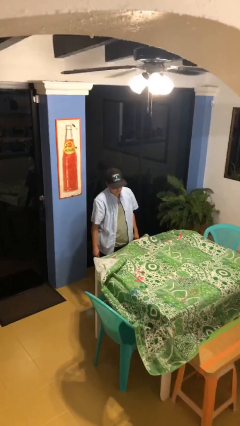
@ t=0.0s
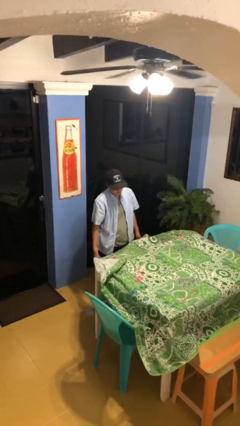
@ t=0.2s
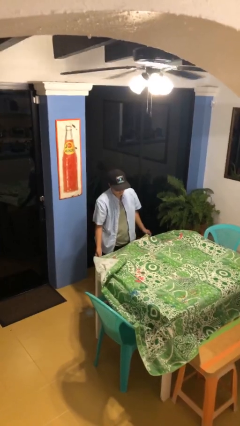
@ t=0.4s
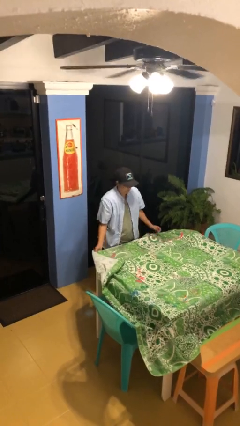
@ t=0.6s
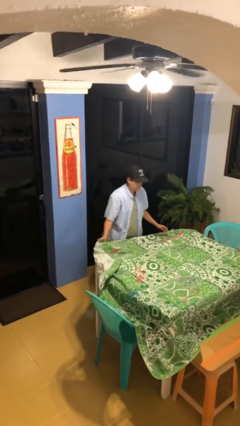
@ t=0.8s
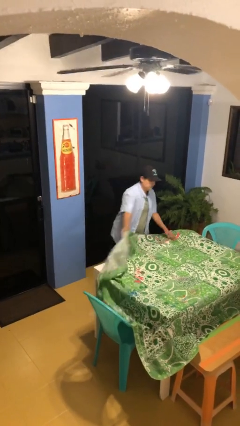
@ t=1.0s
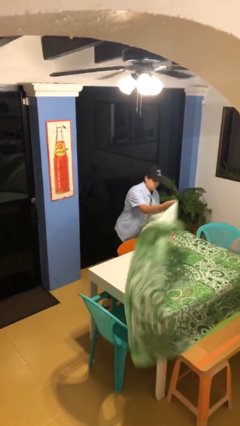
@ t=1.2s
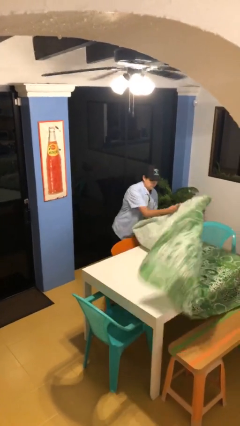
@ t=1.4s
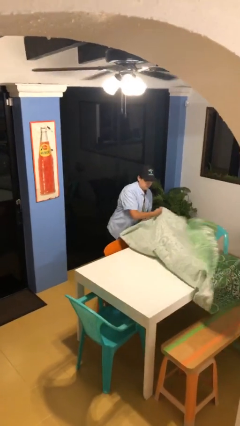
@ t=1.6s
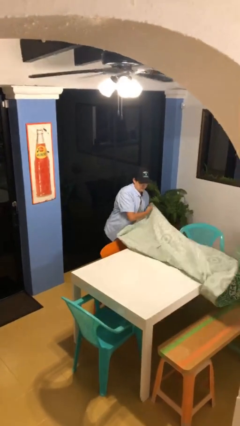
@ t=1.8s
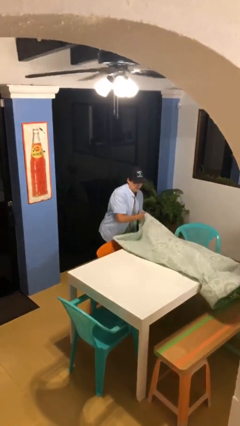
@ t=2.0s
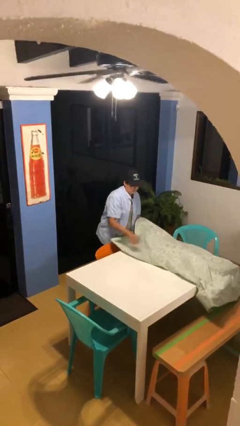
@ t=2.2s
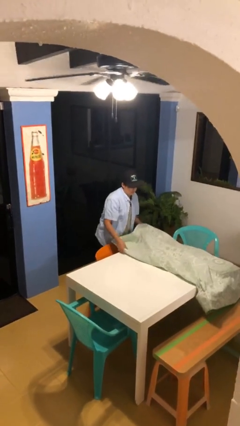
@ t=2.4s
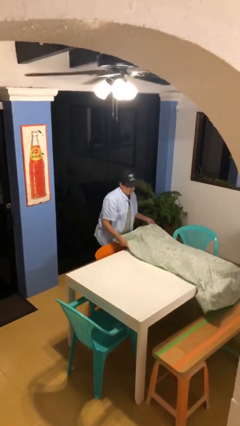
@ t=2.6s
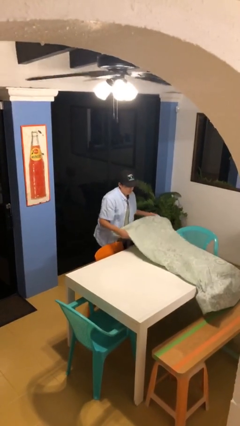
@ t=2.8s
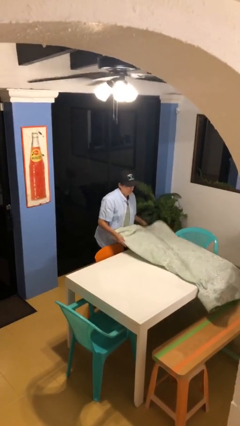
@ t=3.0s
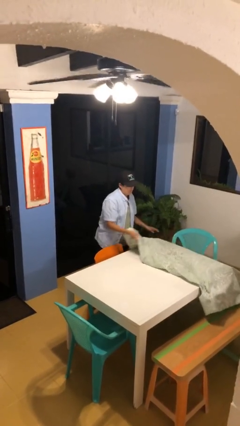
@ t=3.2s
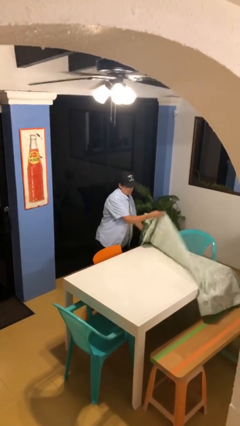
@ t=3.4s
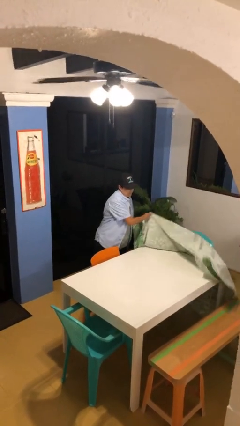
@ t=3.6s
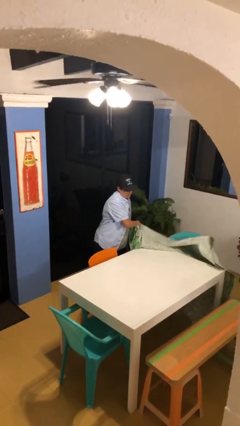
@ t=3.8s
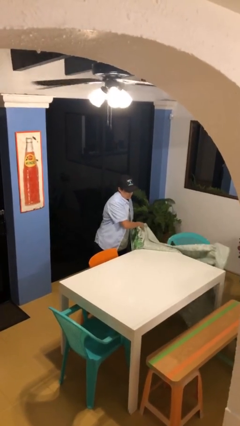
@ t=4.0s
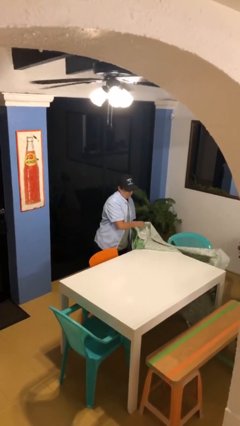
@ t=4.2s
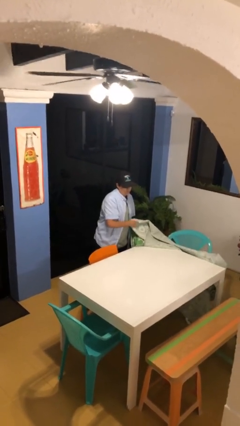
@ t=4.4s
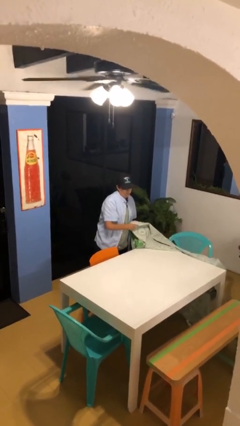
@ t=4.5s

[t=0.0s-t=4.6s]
person folds tablecloth

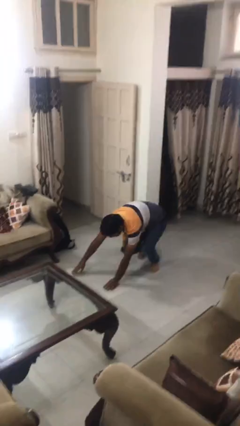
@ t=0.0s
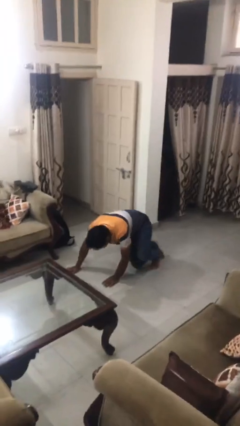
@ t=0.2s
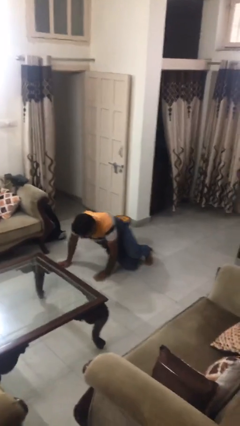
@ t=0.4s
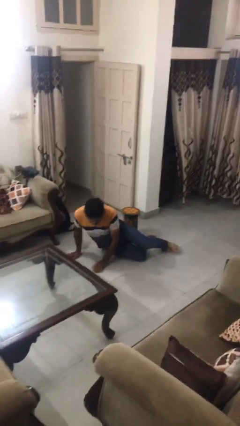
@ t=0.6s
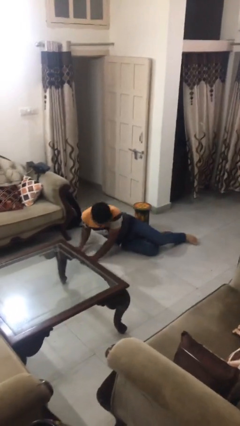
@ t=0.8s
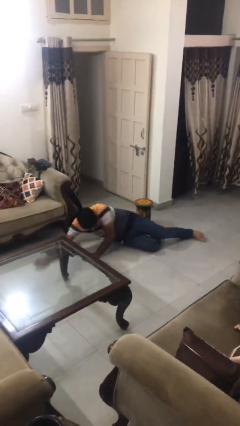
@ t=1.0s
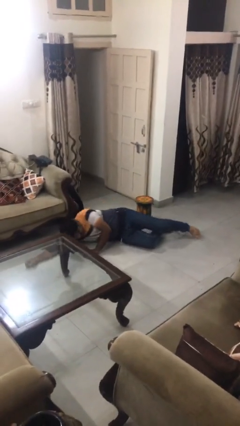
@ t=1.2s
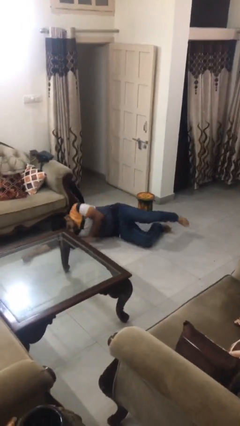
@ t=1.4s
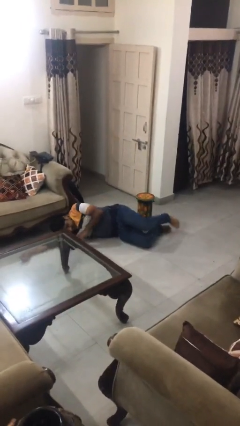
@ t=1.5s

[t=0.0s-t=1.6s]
person trips on object on floor

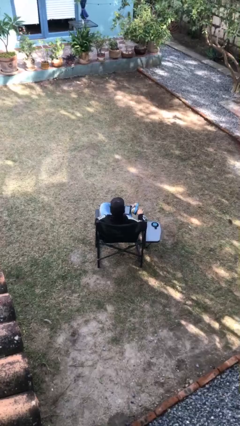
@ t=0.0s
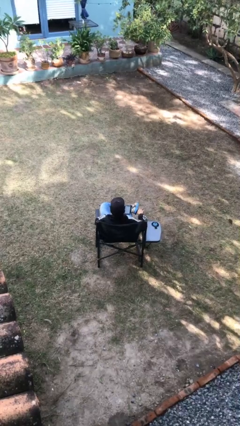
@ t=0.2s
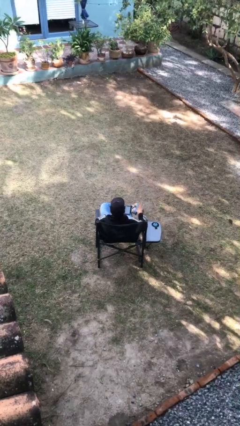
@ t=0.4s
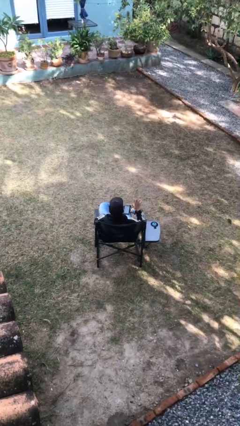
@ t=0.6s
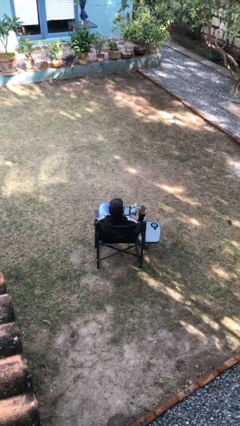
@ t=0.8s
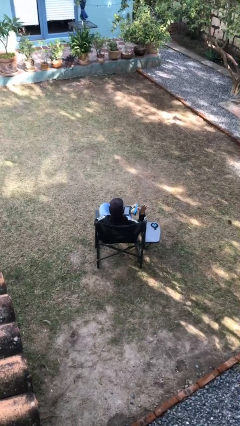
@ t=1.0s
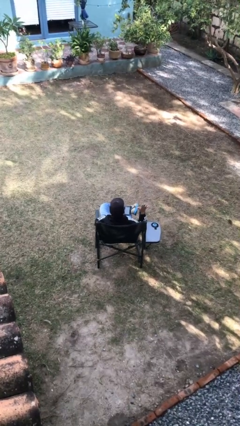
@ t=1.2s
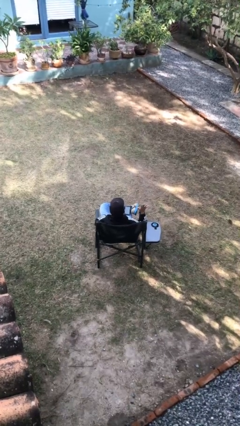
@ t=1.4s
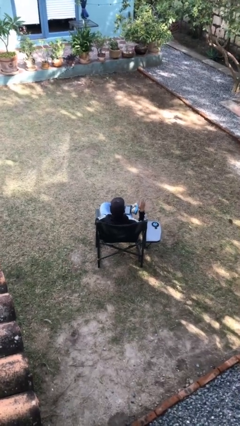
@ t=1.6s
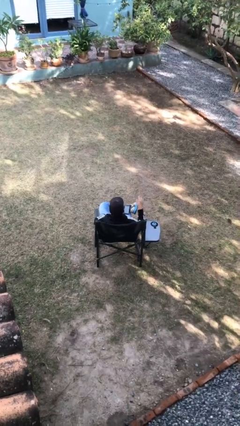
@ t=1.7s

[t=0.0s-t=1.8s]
person gestures number five

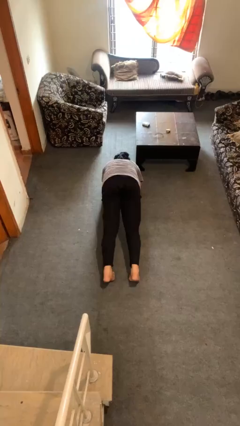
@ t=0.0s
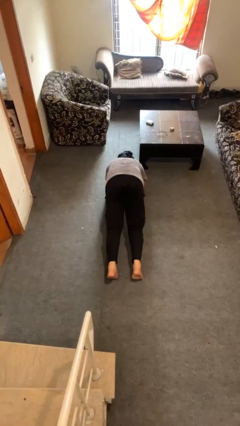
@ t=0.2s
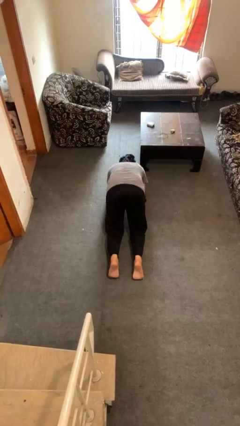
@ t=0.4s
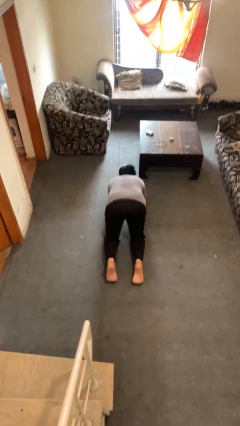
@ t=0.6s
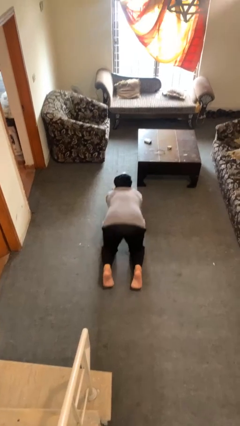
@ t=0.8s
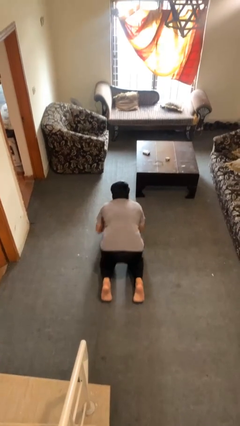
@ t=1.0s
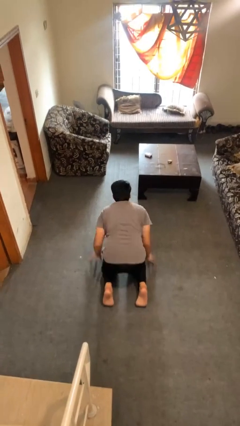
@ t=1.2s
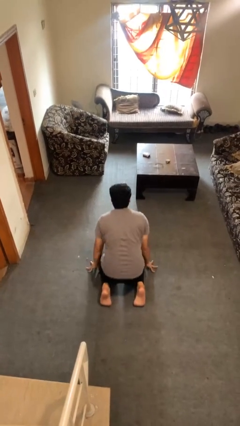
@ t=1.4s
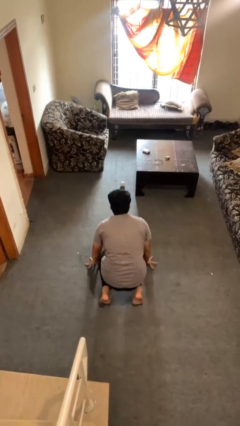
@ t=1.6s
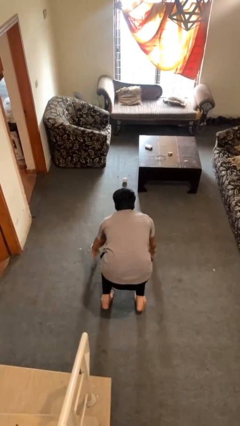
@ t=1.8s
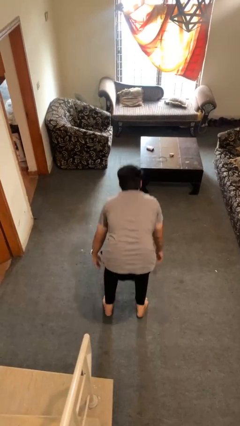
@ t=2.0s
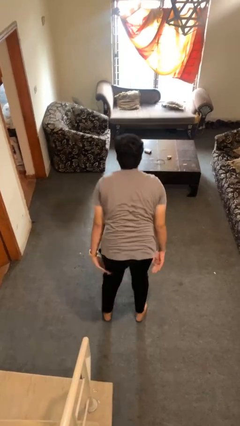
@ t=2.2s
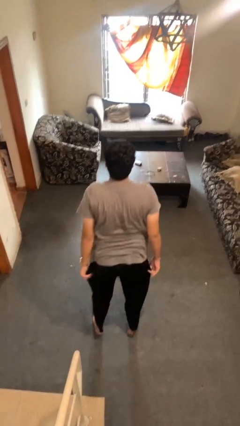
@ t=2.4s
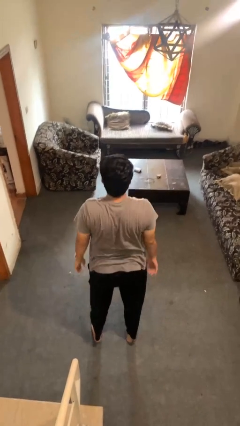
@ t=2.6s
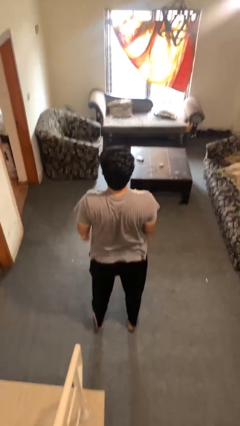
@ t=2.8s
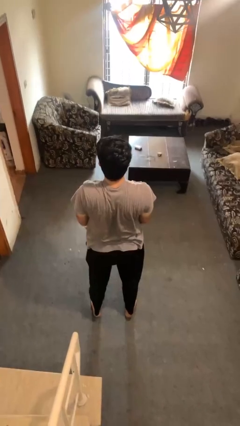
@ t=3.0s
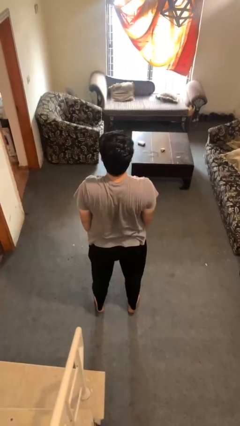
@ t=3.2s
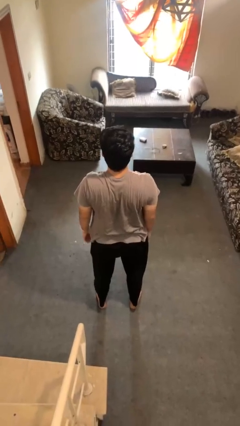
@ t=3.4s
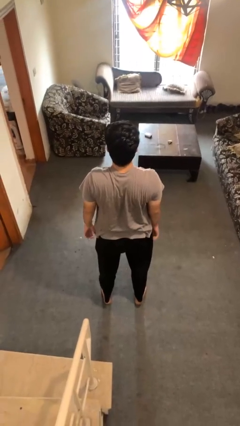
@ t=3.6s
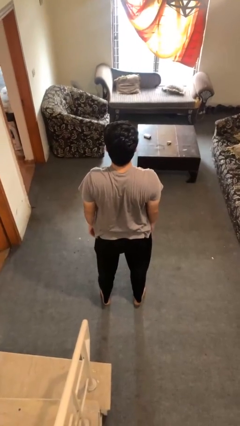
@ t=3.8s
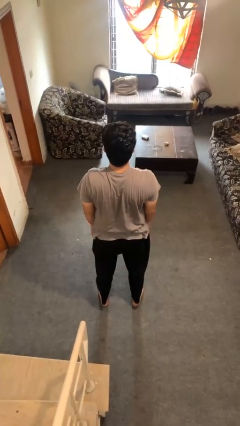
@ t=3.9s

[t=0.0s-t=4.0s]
person stands up from floor

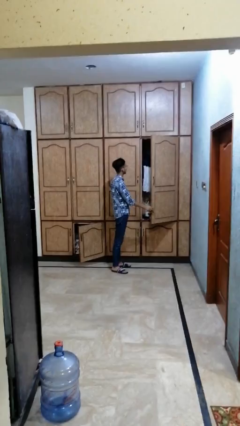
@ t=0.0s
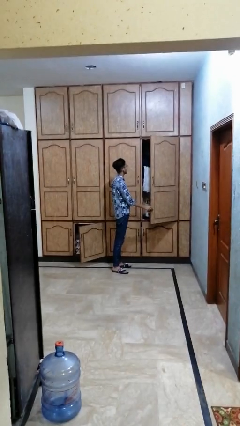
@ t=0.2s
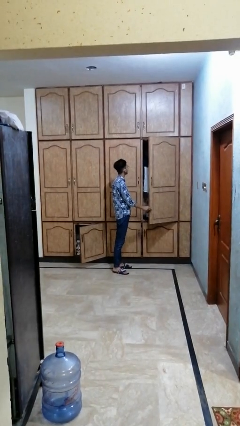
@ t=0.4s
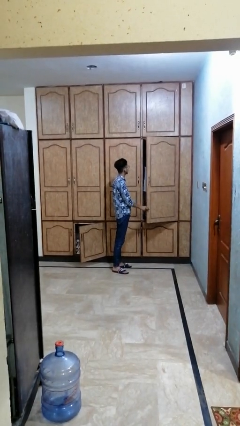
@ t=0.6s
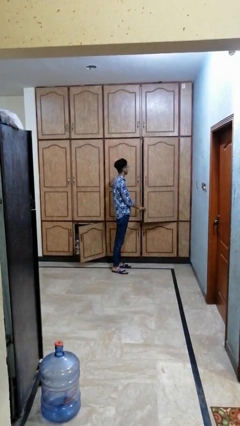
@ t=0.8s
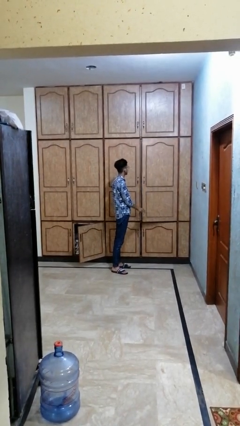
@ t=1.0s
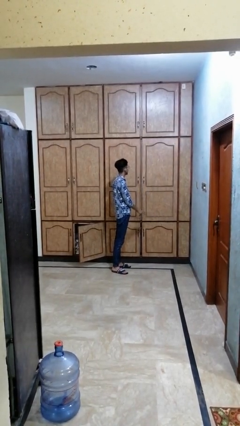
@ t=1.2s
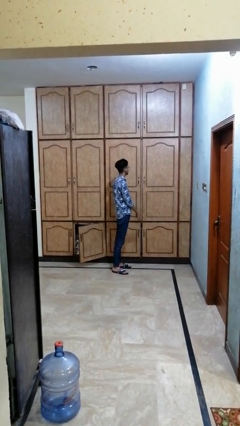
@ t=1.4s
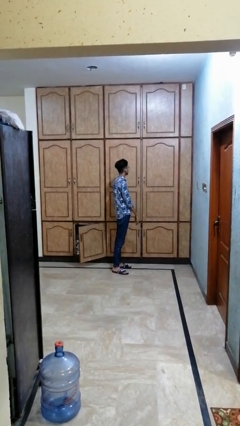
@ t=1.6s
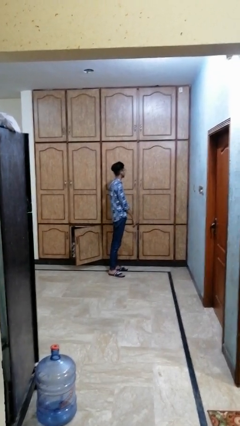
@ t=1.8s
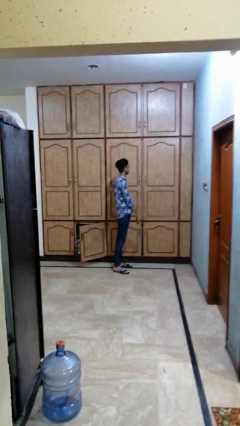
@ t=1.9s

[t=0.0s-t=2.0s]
person closes dresser drawer

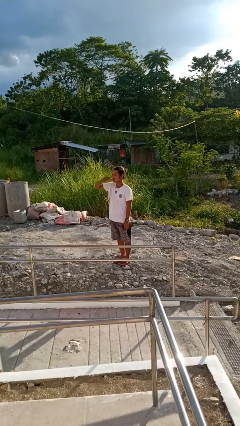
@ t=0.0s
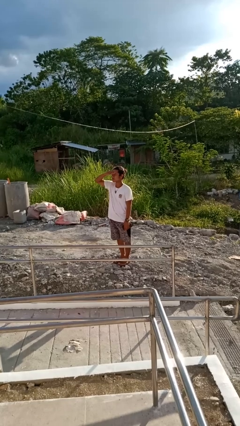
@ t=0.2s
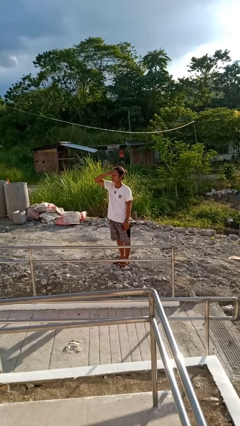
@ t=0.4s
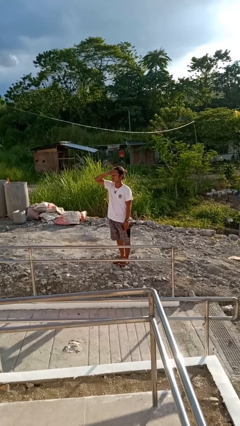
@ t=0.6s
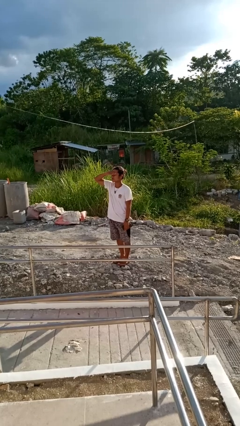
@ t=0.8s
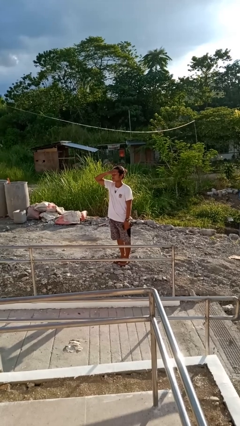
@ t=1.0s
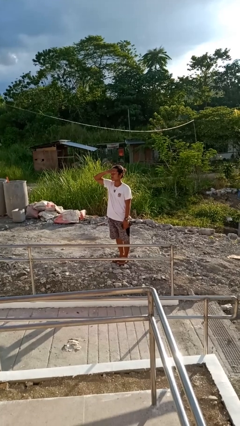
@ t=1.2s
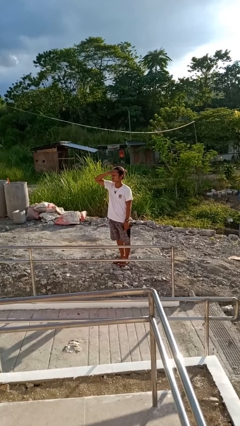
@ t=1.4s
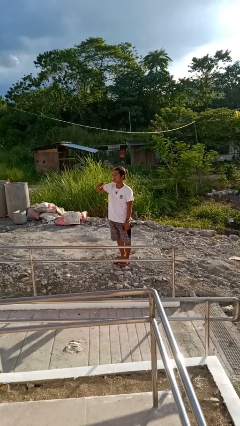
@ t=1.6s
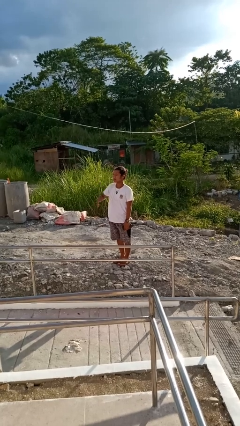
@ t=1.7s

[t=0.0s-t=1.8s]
person shades eyes

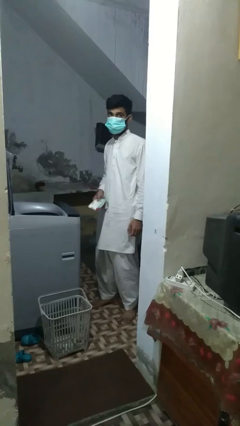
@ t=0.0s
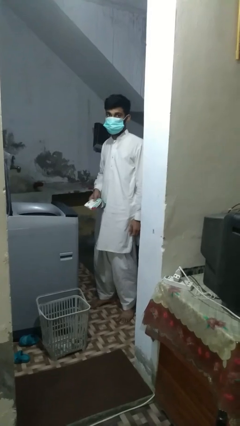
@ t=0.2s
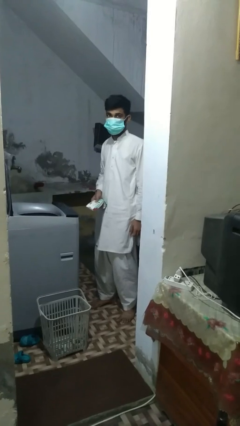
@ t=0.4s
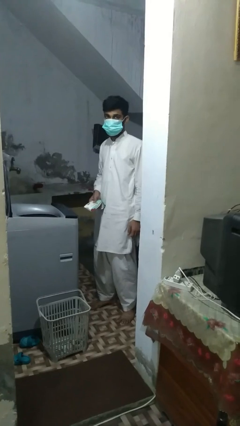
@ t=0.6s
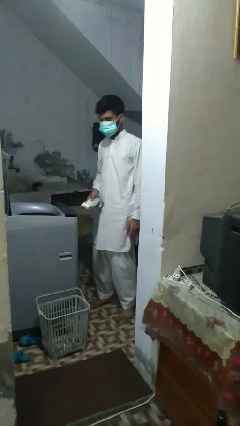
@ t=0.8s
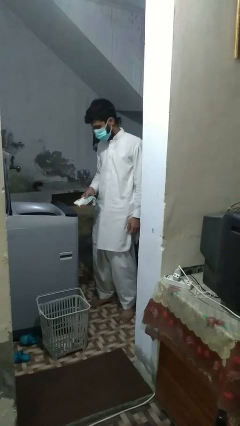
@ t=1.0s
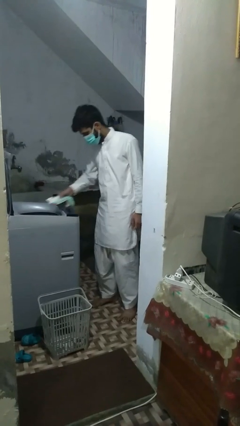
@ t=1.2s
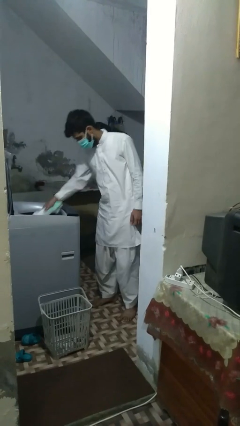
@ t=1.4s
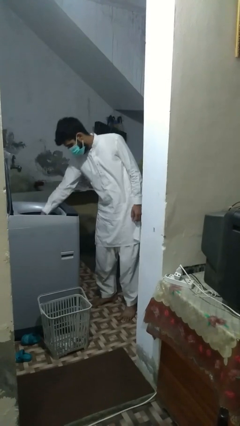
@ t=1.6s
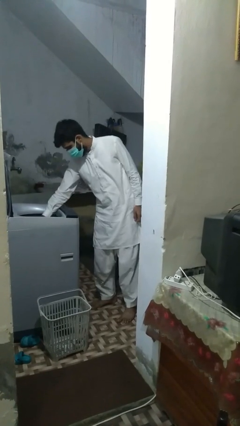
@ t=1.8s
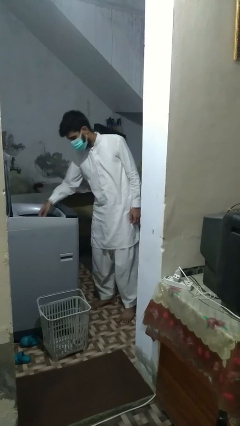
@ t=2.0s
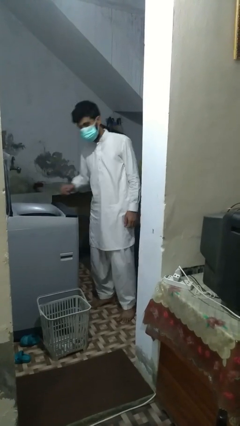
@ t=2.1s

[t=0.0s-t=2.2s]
person loads dryer
